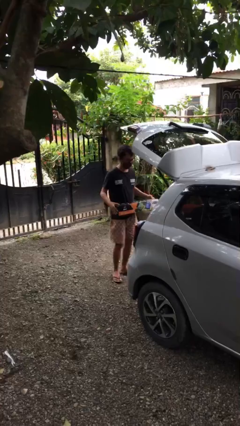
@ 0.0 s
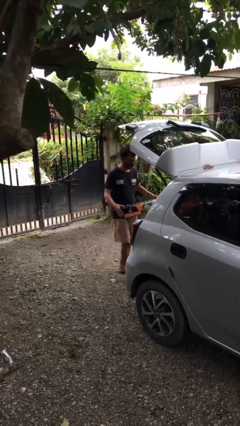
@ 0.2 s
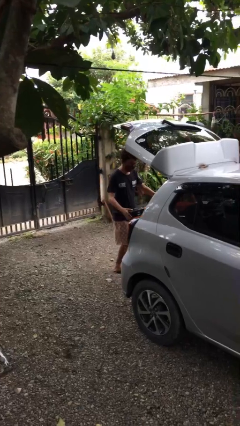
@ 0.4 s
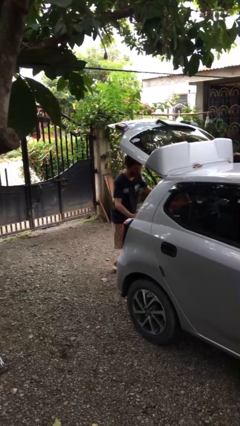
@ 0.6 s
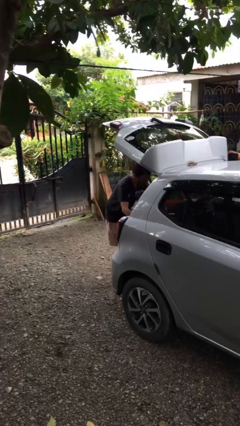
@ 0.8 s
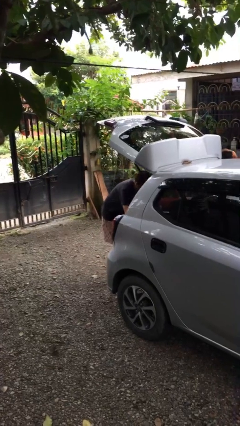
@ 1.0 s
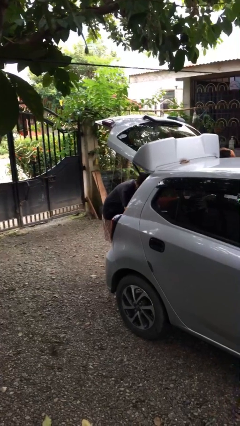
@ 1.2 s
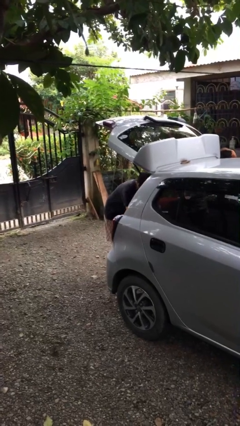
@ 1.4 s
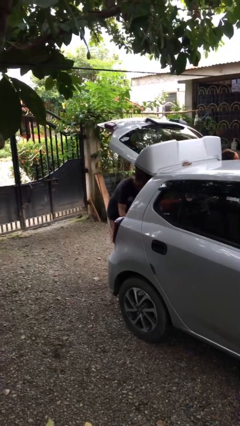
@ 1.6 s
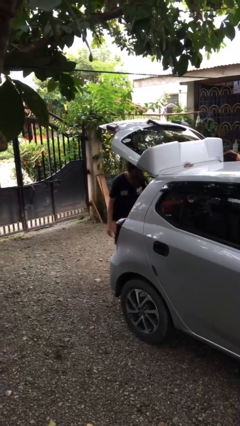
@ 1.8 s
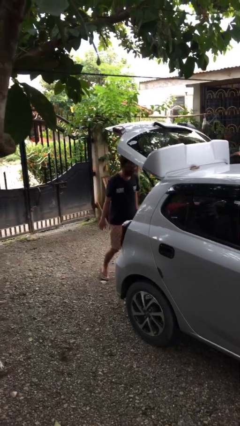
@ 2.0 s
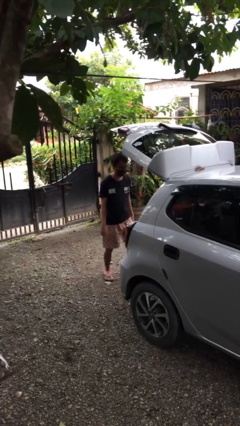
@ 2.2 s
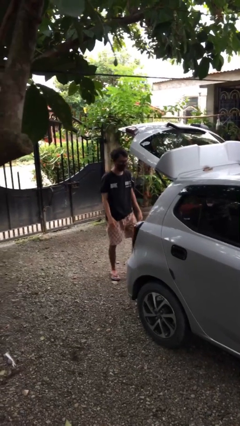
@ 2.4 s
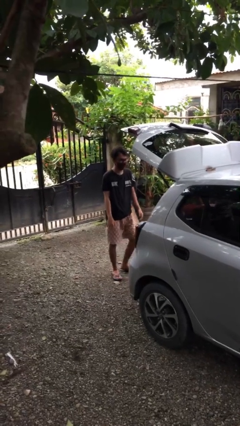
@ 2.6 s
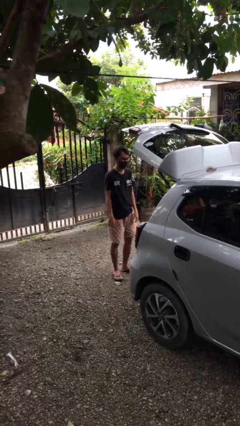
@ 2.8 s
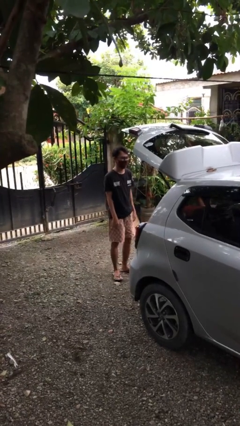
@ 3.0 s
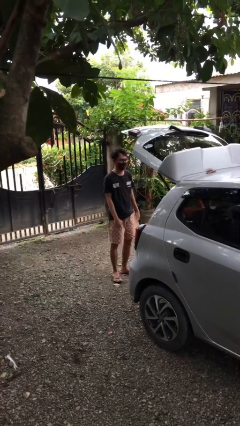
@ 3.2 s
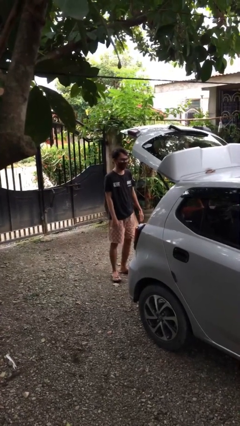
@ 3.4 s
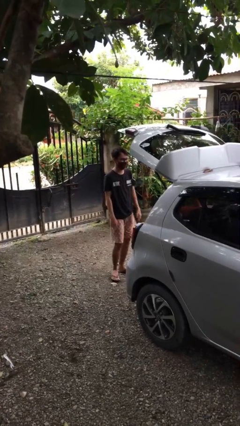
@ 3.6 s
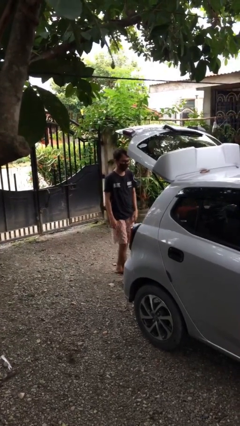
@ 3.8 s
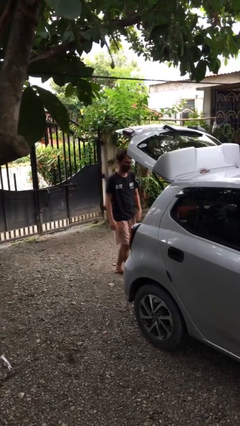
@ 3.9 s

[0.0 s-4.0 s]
person loads car

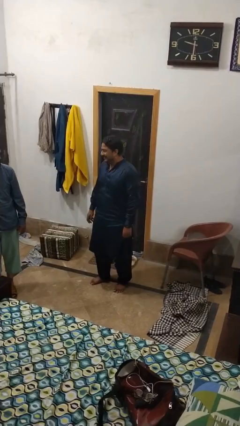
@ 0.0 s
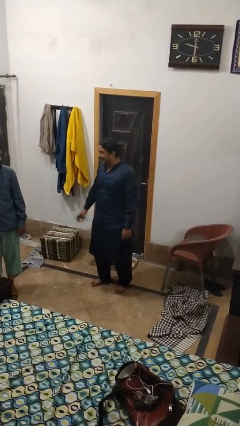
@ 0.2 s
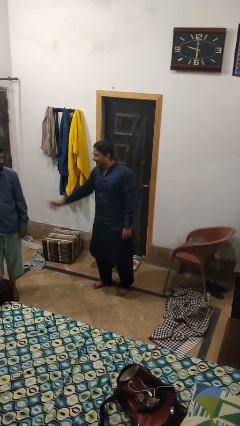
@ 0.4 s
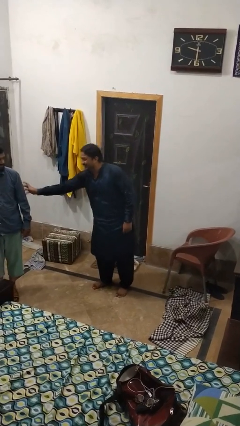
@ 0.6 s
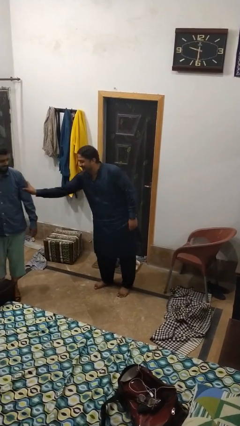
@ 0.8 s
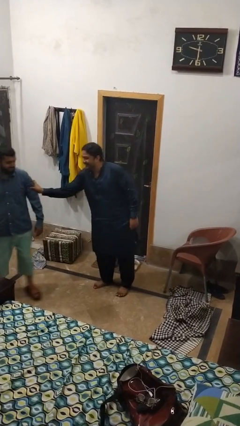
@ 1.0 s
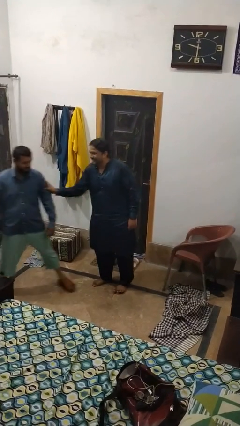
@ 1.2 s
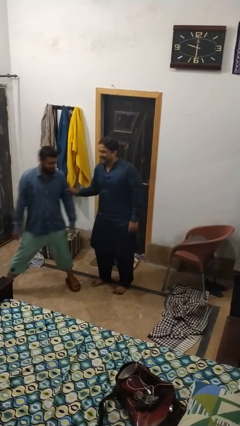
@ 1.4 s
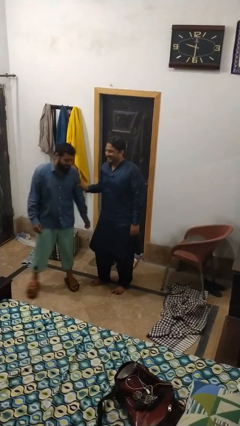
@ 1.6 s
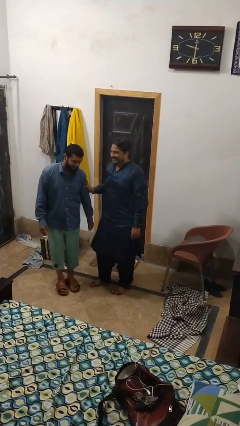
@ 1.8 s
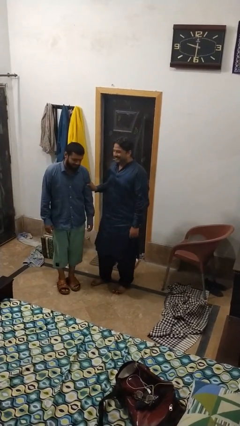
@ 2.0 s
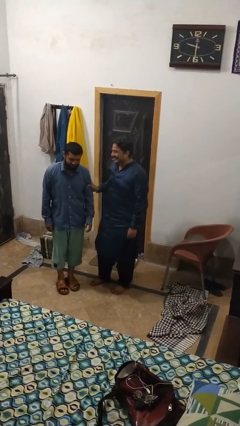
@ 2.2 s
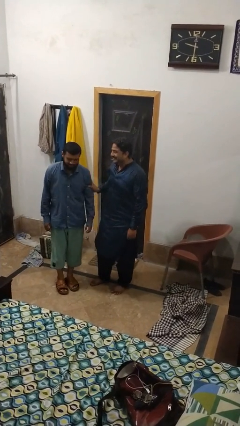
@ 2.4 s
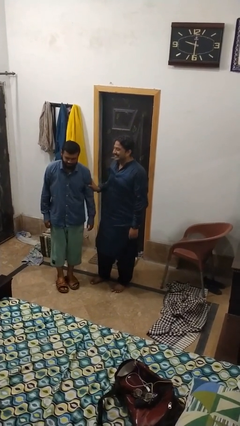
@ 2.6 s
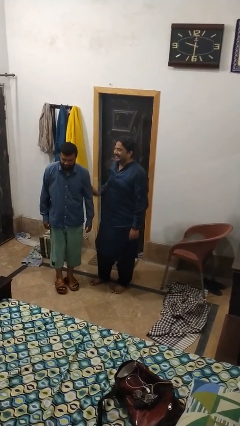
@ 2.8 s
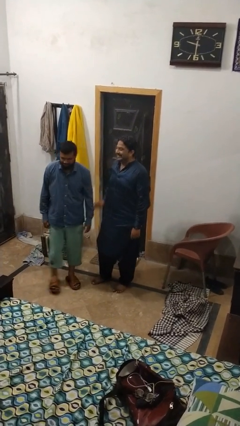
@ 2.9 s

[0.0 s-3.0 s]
person grabs person by hair

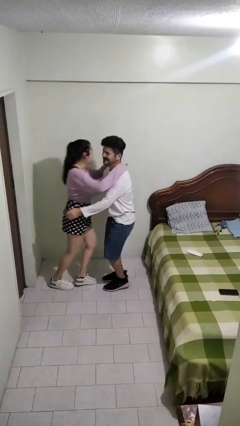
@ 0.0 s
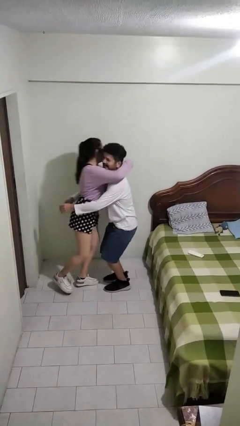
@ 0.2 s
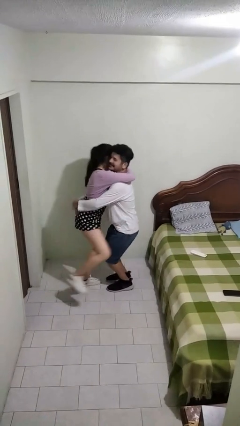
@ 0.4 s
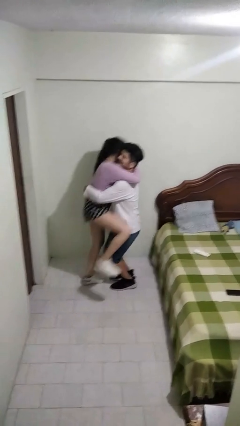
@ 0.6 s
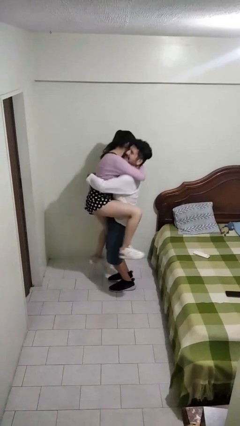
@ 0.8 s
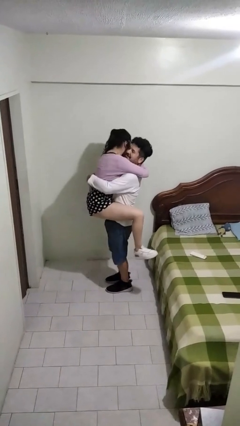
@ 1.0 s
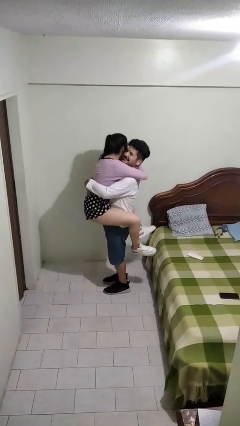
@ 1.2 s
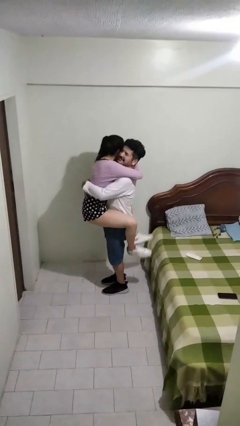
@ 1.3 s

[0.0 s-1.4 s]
person picks up person

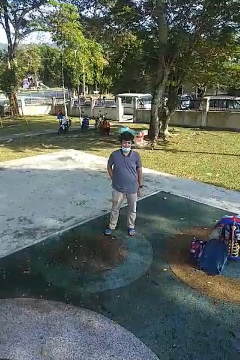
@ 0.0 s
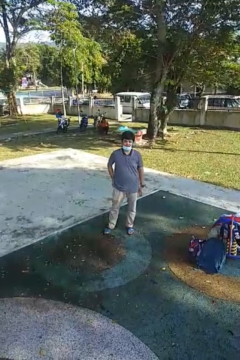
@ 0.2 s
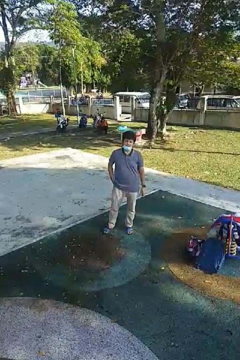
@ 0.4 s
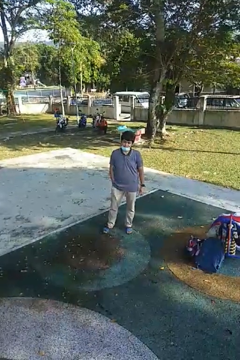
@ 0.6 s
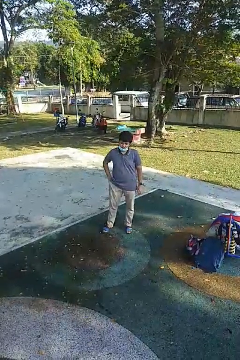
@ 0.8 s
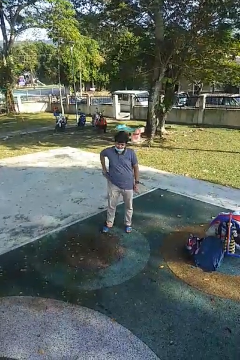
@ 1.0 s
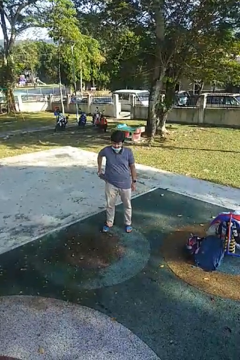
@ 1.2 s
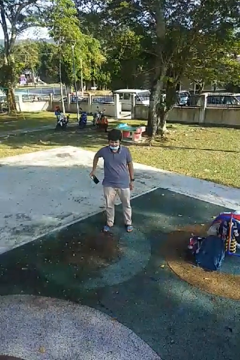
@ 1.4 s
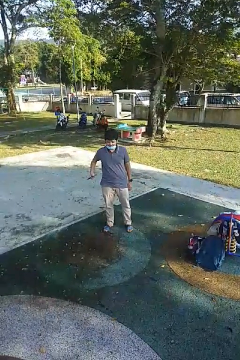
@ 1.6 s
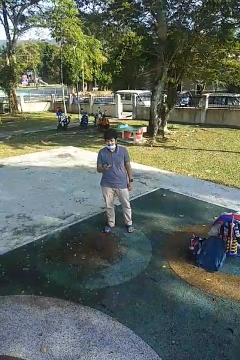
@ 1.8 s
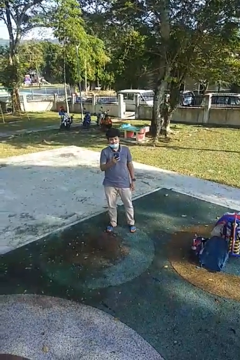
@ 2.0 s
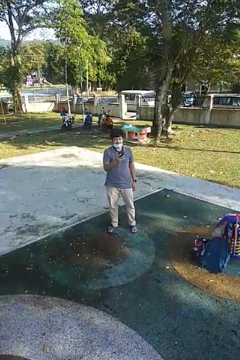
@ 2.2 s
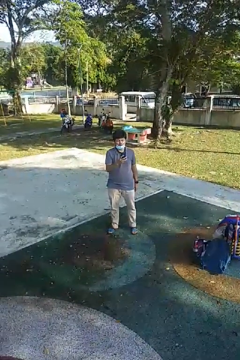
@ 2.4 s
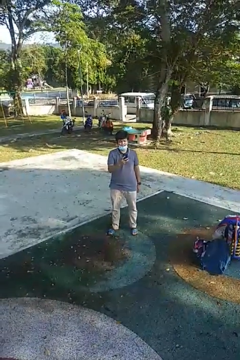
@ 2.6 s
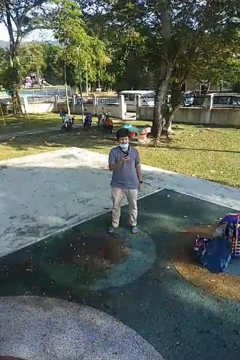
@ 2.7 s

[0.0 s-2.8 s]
person takes phone from pocket

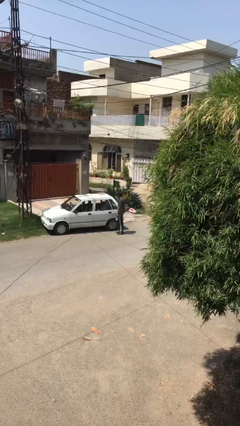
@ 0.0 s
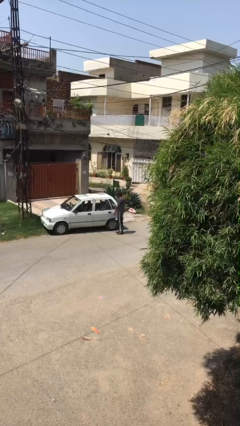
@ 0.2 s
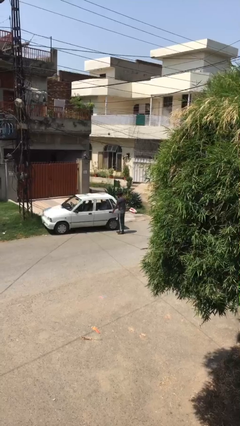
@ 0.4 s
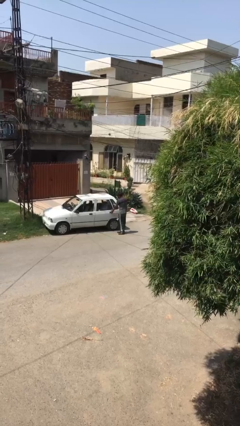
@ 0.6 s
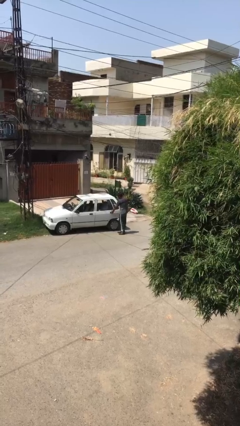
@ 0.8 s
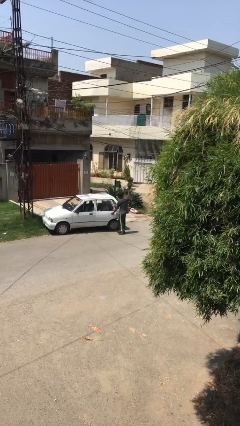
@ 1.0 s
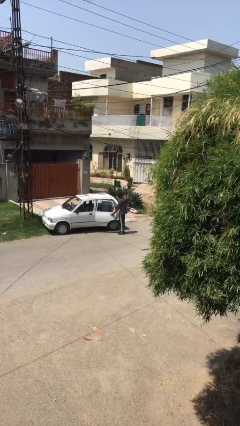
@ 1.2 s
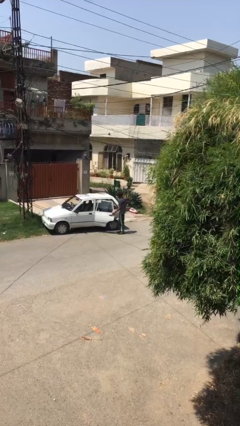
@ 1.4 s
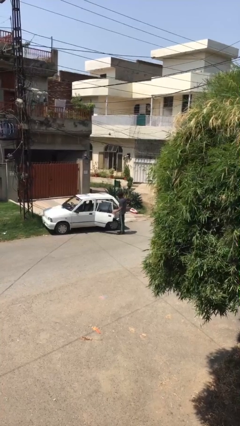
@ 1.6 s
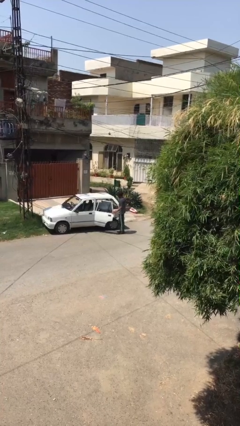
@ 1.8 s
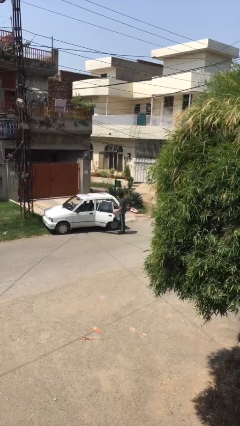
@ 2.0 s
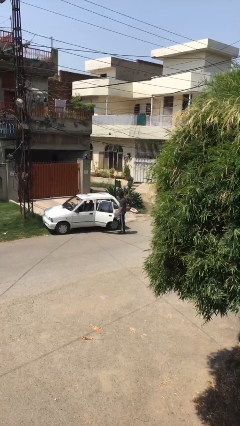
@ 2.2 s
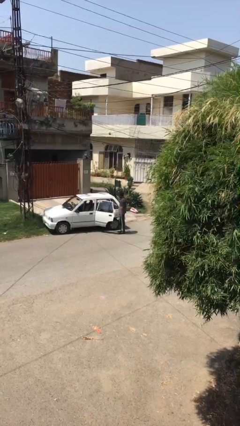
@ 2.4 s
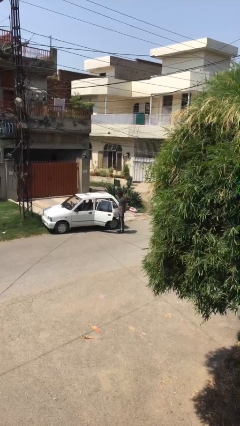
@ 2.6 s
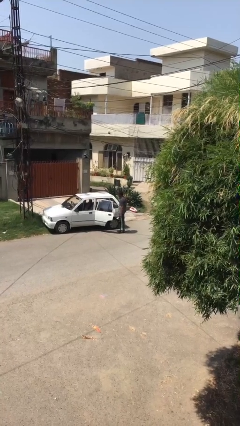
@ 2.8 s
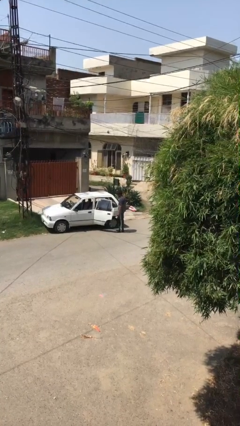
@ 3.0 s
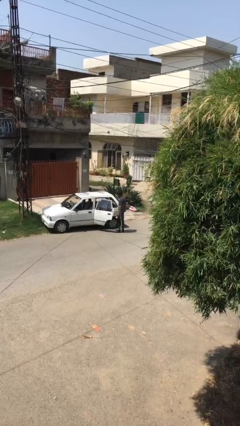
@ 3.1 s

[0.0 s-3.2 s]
person opens car door

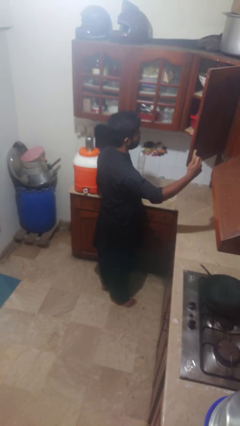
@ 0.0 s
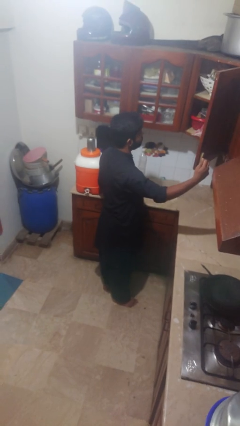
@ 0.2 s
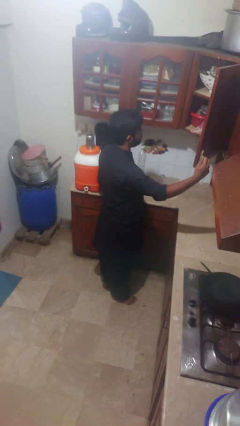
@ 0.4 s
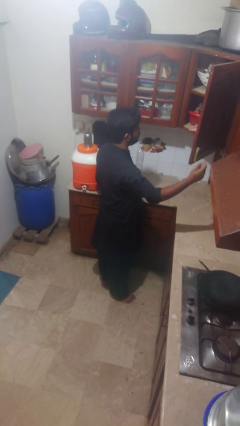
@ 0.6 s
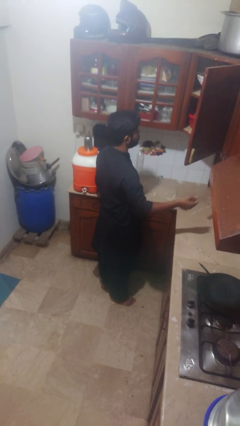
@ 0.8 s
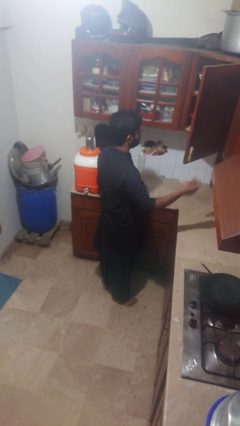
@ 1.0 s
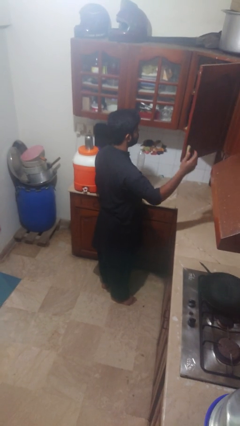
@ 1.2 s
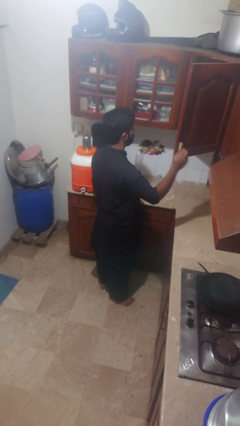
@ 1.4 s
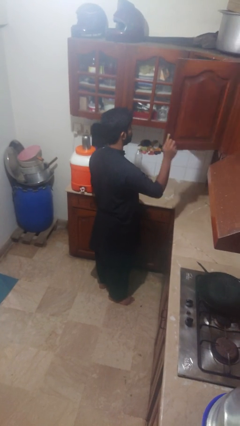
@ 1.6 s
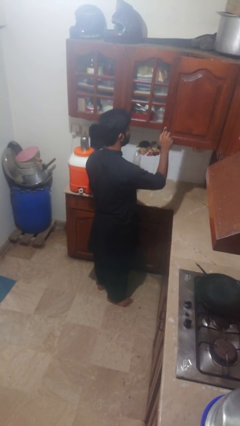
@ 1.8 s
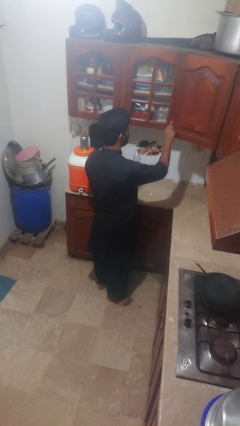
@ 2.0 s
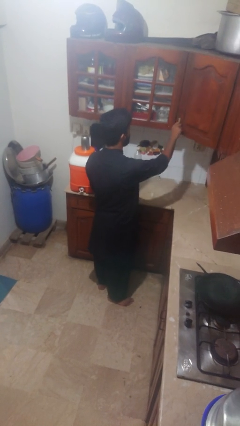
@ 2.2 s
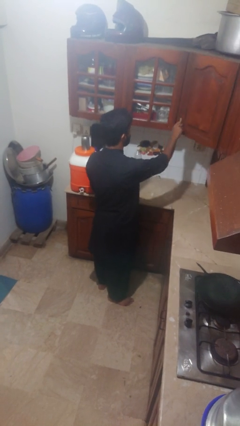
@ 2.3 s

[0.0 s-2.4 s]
person closes cabinet

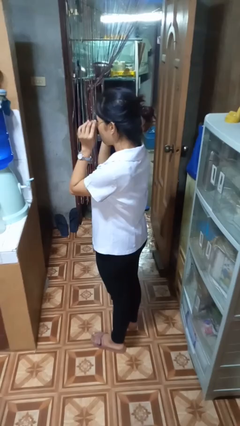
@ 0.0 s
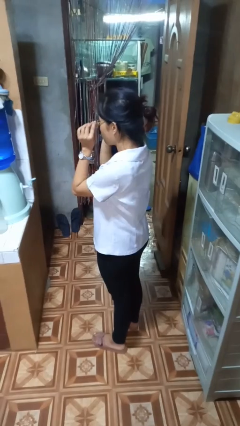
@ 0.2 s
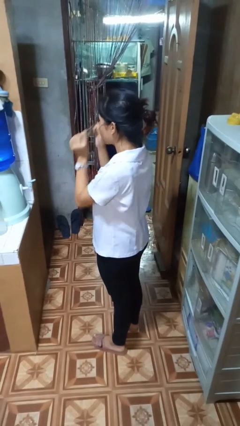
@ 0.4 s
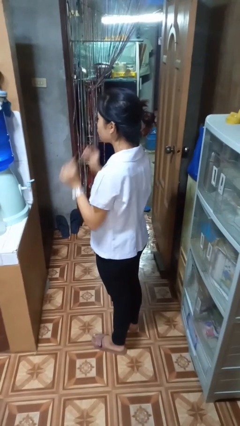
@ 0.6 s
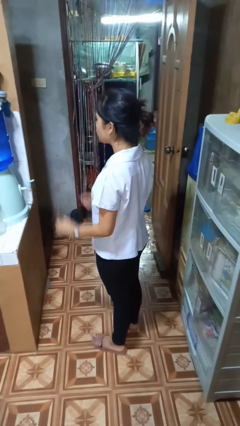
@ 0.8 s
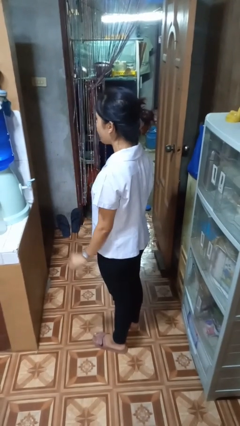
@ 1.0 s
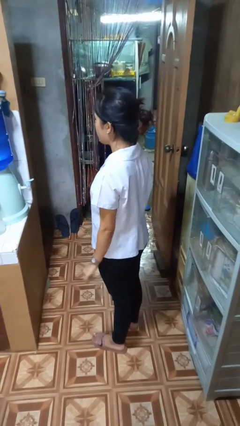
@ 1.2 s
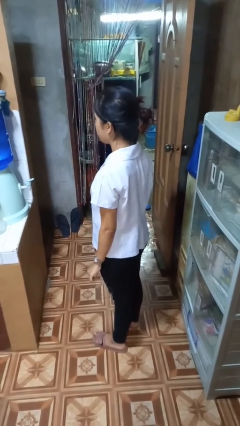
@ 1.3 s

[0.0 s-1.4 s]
person takes off glasses
